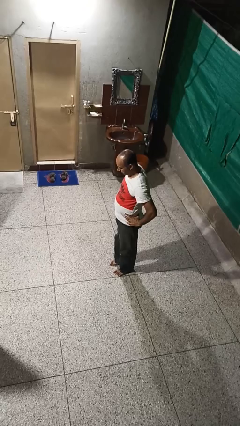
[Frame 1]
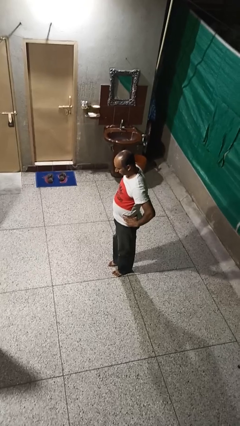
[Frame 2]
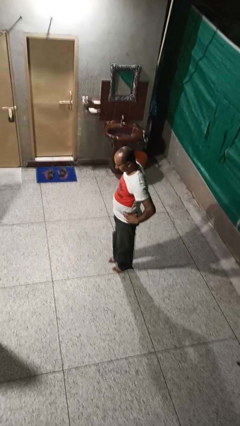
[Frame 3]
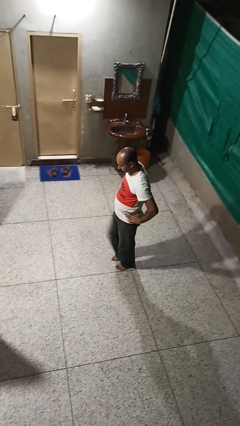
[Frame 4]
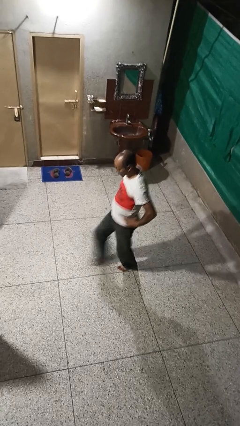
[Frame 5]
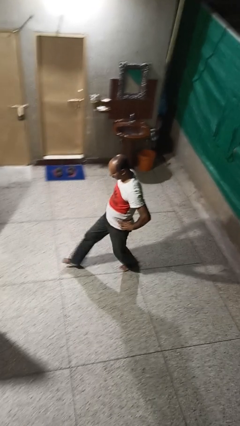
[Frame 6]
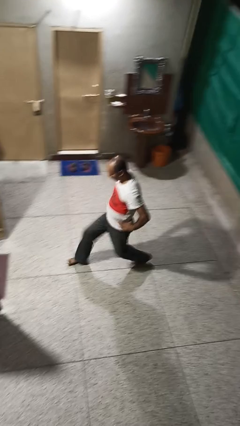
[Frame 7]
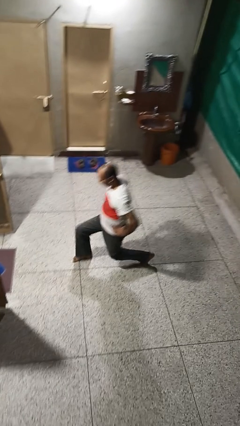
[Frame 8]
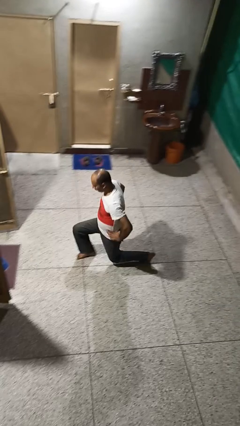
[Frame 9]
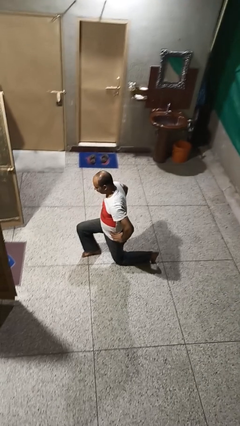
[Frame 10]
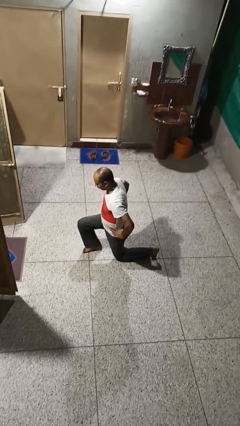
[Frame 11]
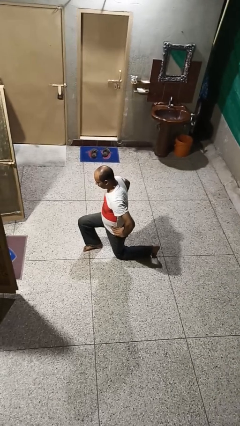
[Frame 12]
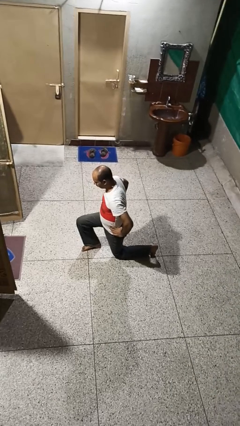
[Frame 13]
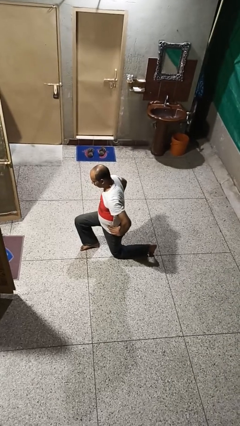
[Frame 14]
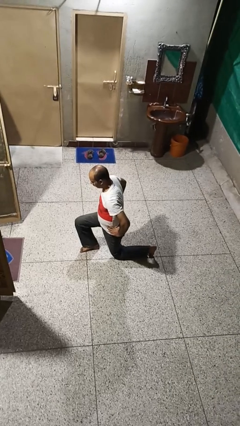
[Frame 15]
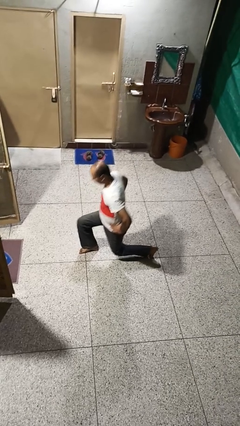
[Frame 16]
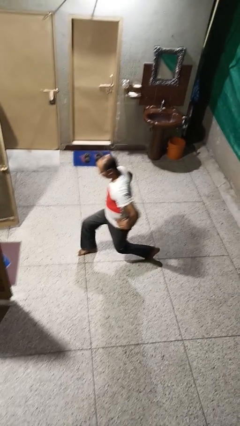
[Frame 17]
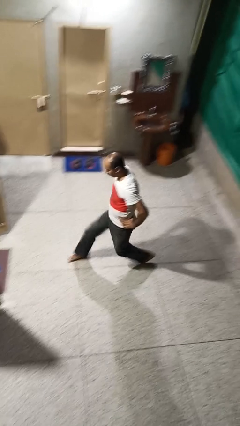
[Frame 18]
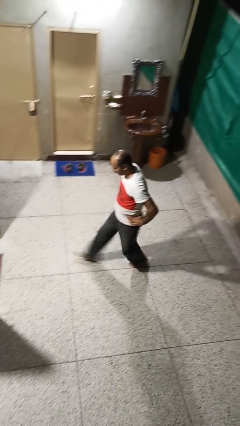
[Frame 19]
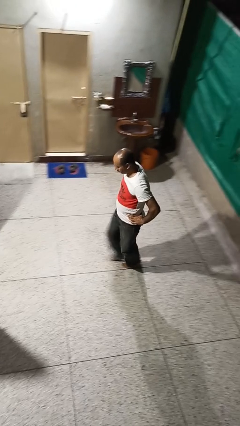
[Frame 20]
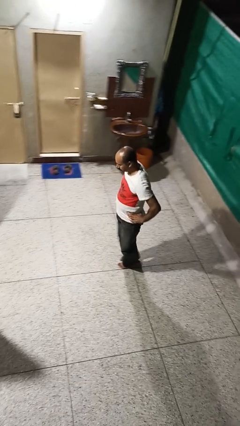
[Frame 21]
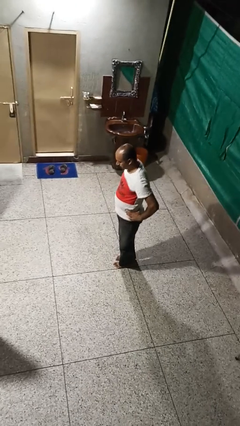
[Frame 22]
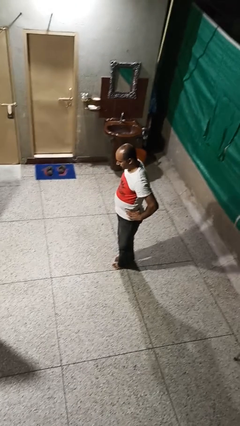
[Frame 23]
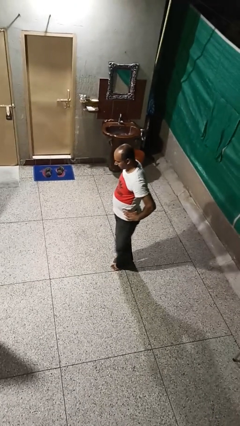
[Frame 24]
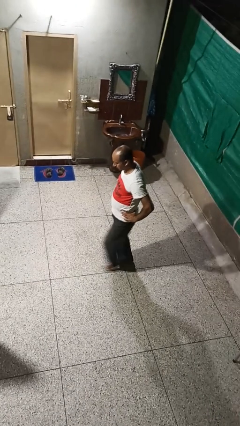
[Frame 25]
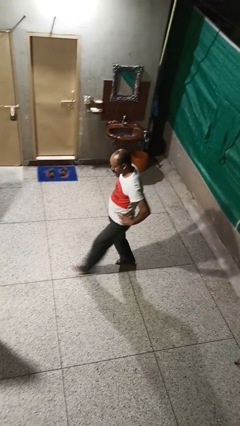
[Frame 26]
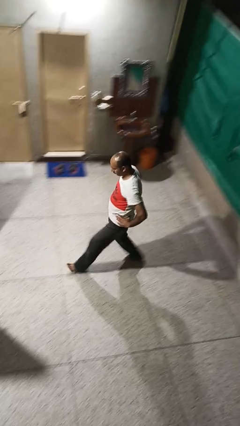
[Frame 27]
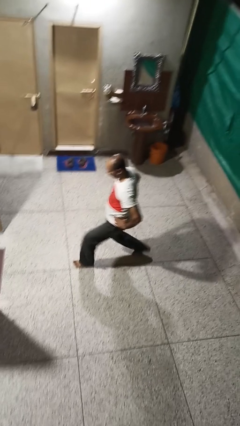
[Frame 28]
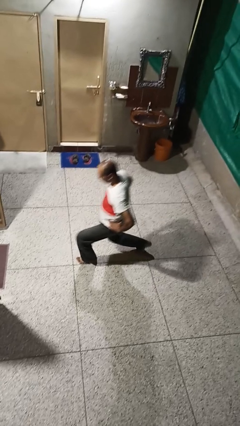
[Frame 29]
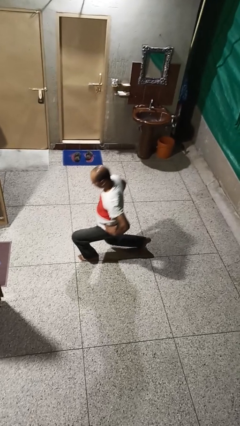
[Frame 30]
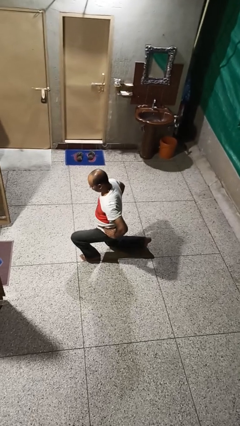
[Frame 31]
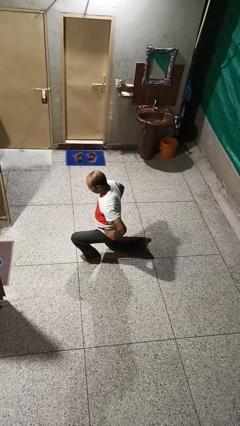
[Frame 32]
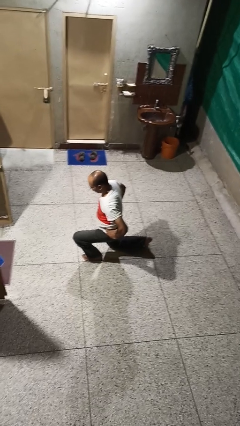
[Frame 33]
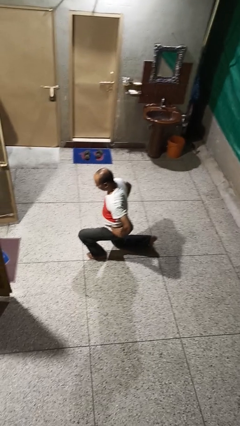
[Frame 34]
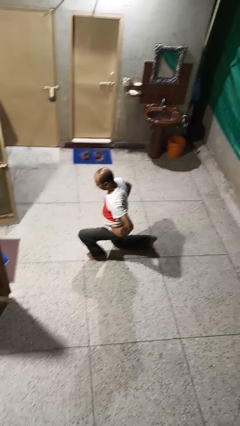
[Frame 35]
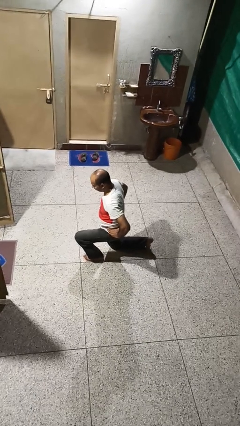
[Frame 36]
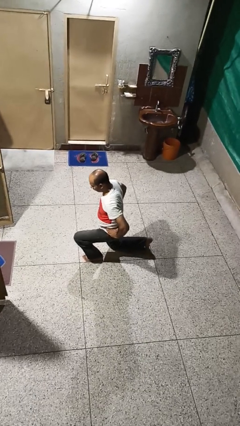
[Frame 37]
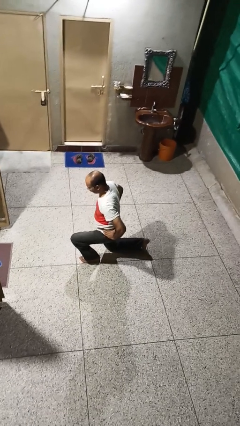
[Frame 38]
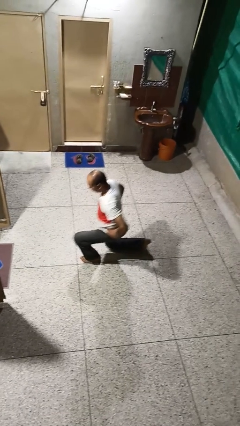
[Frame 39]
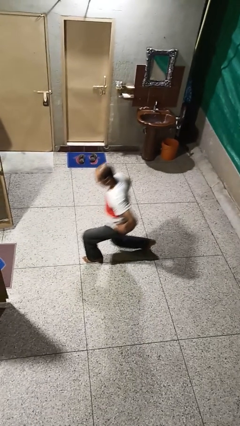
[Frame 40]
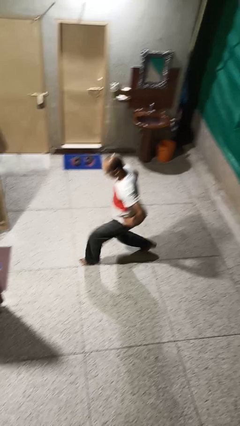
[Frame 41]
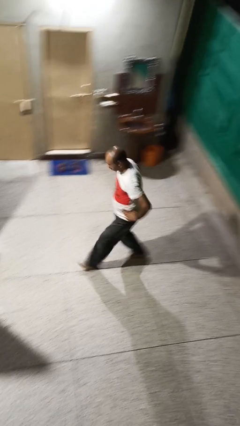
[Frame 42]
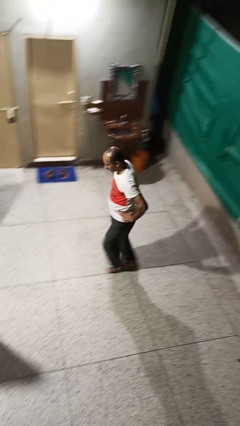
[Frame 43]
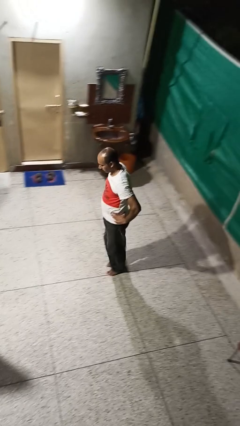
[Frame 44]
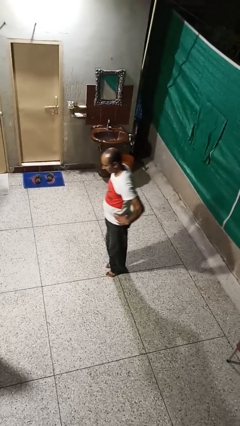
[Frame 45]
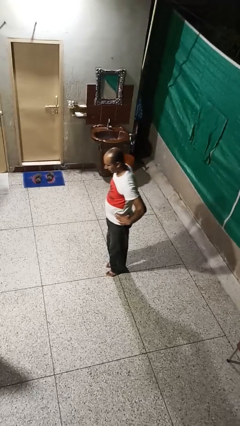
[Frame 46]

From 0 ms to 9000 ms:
person exercises with lunges

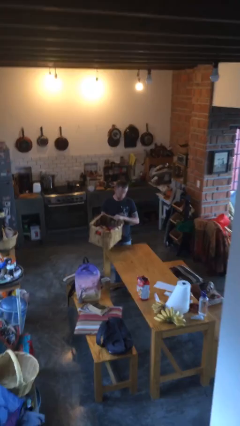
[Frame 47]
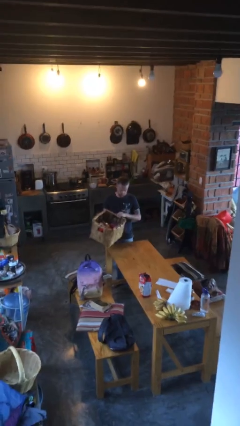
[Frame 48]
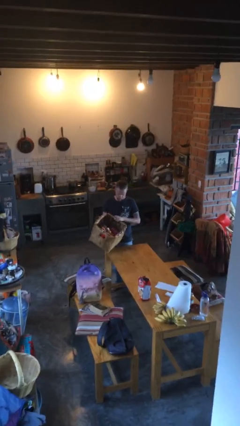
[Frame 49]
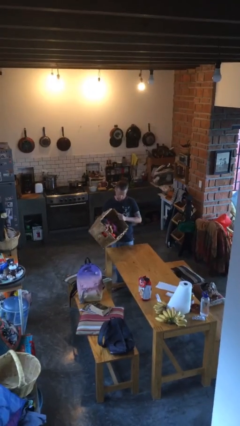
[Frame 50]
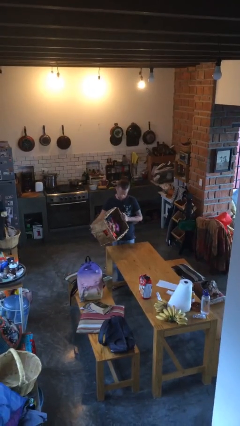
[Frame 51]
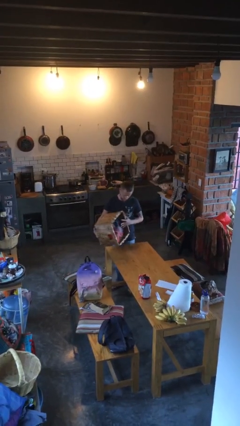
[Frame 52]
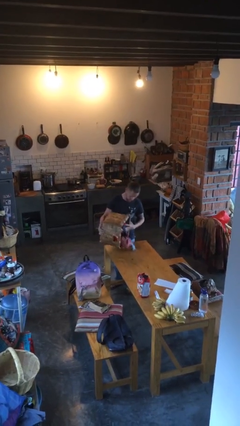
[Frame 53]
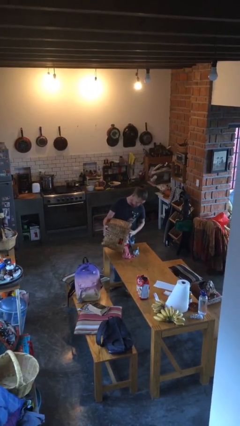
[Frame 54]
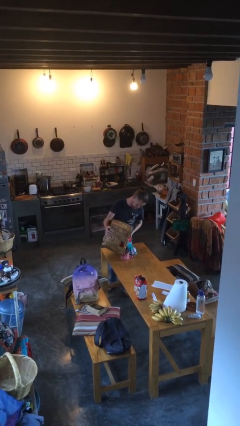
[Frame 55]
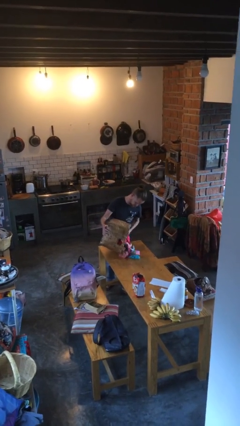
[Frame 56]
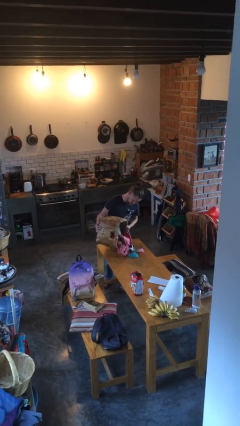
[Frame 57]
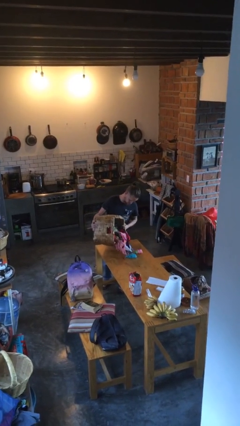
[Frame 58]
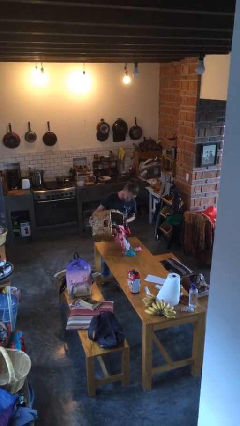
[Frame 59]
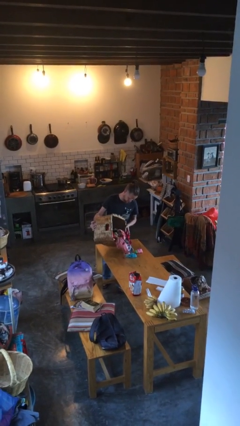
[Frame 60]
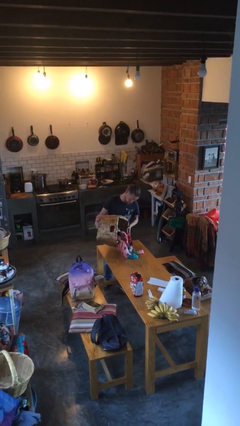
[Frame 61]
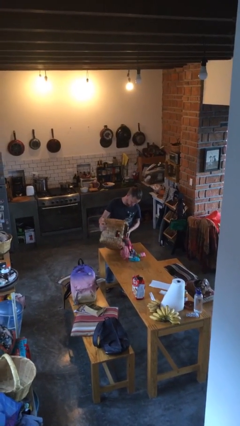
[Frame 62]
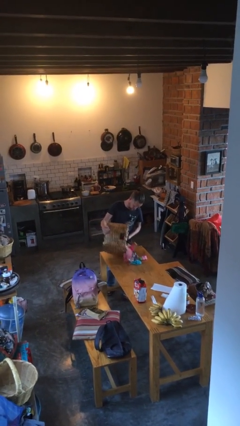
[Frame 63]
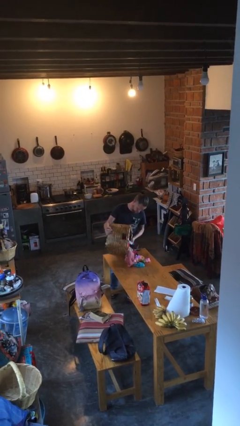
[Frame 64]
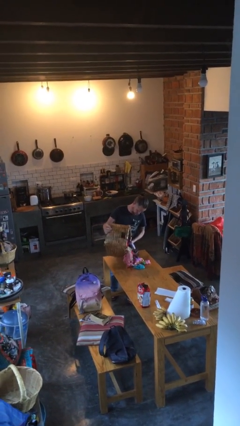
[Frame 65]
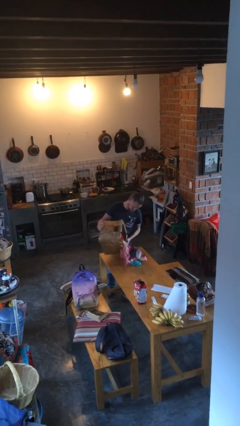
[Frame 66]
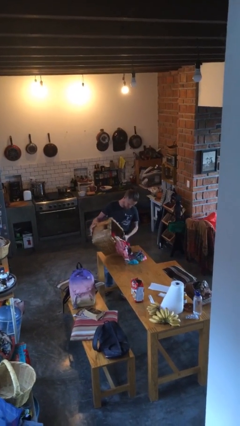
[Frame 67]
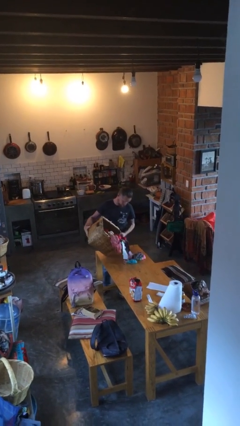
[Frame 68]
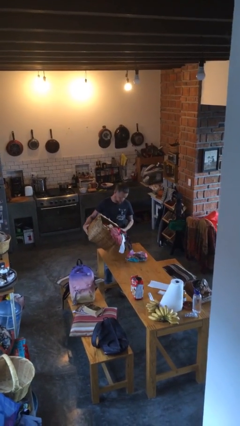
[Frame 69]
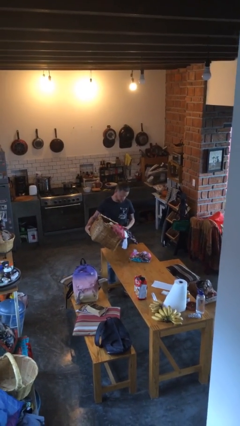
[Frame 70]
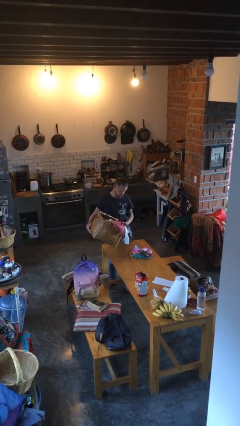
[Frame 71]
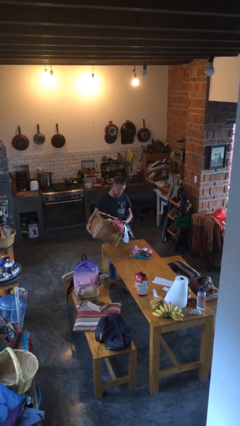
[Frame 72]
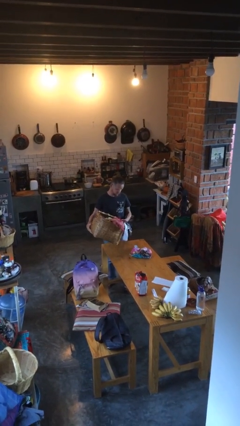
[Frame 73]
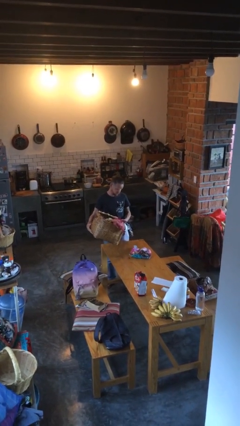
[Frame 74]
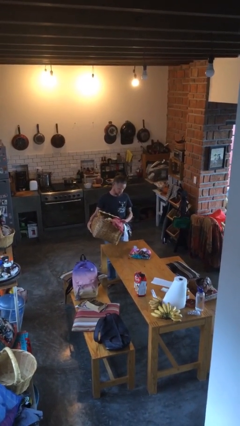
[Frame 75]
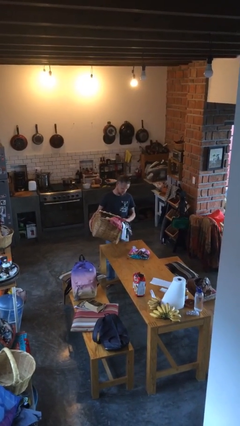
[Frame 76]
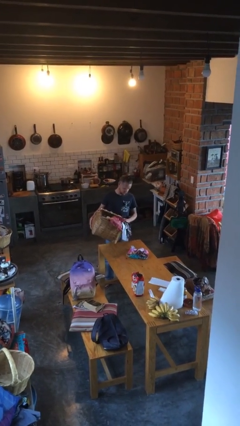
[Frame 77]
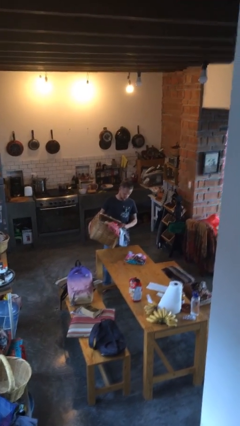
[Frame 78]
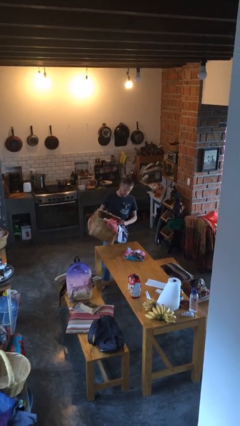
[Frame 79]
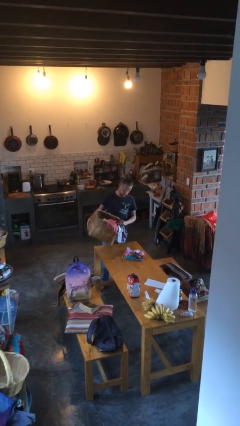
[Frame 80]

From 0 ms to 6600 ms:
person unloads box onto table

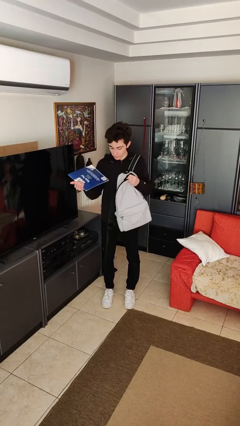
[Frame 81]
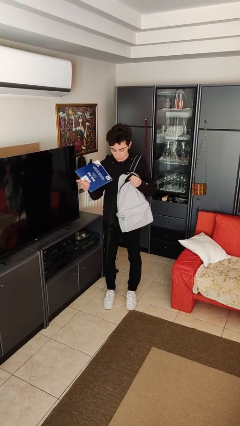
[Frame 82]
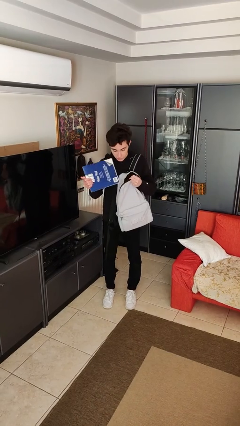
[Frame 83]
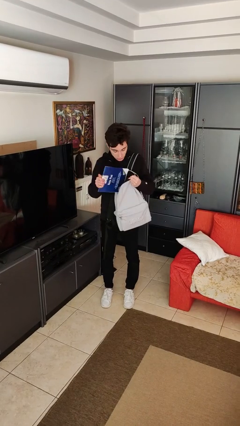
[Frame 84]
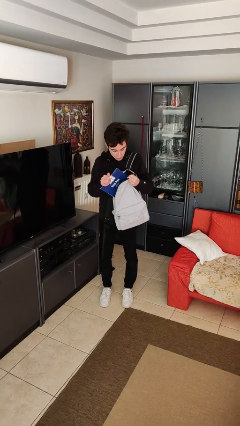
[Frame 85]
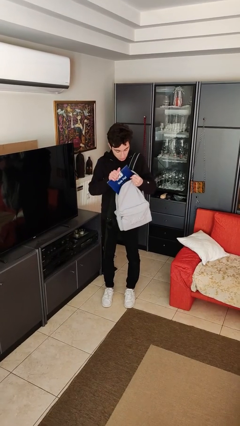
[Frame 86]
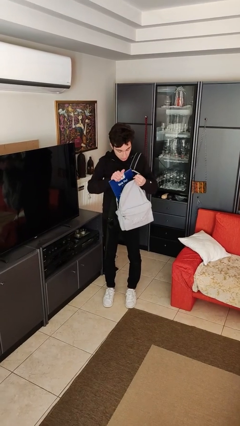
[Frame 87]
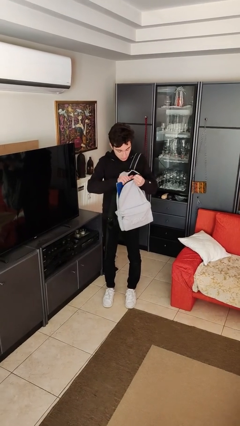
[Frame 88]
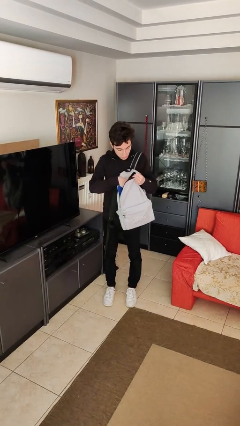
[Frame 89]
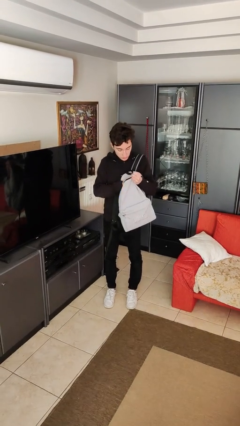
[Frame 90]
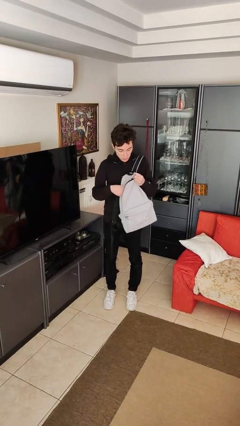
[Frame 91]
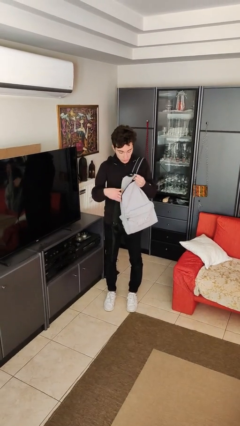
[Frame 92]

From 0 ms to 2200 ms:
person puts object into backpack
